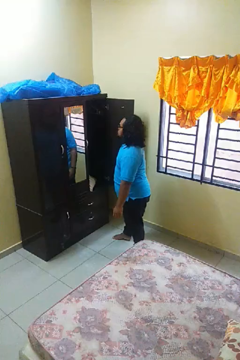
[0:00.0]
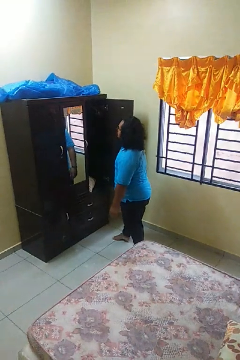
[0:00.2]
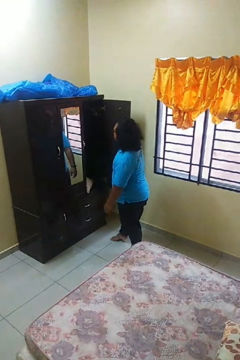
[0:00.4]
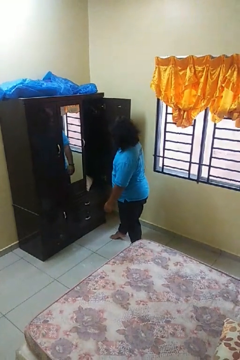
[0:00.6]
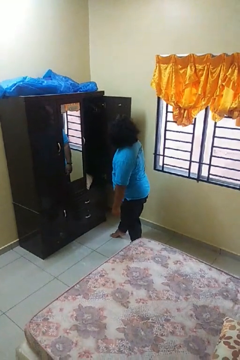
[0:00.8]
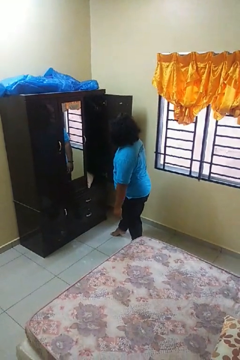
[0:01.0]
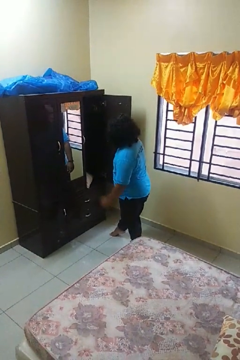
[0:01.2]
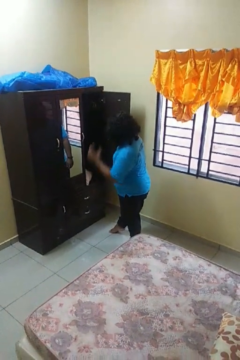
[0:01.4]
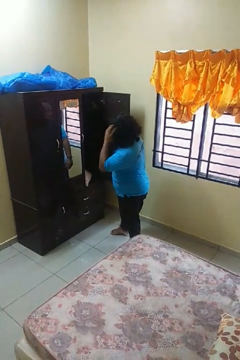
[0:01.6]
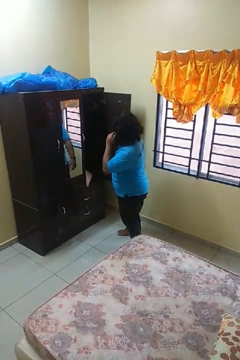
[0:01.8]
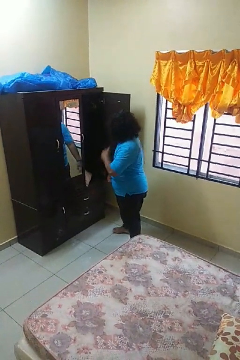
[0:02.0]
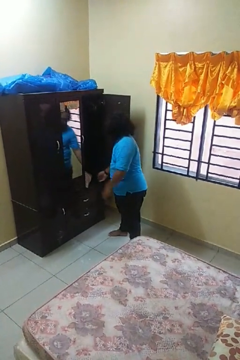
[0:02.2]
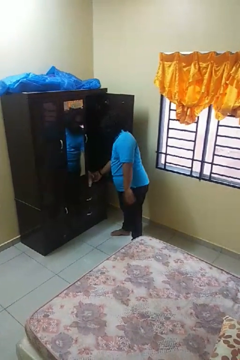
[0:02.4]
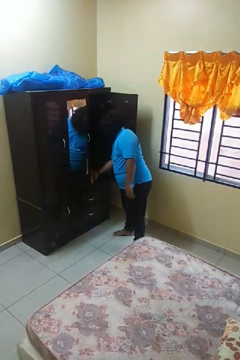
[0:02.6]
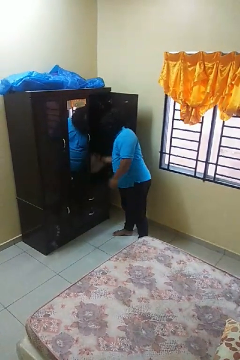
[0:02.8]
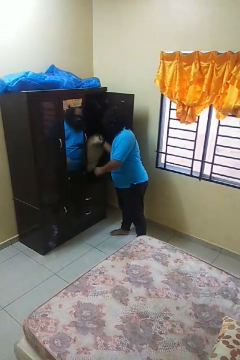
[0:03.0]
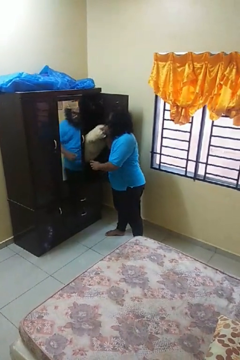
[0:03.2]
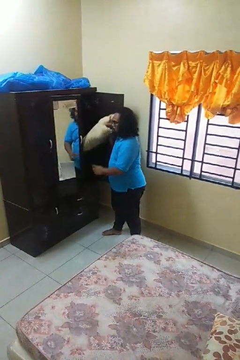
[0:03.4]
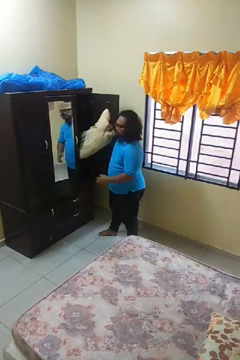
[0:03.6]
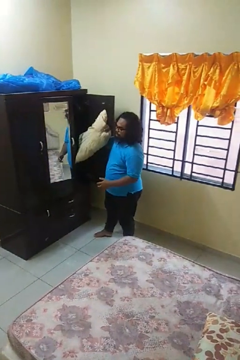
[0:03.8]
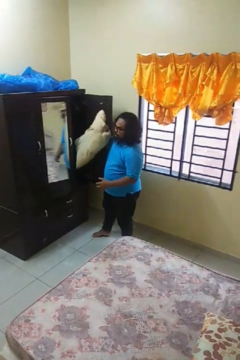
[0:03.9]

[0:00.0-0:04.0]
person picks up object from cabinet

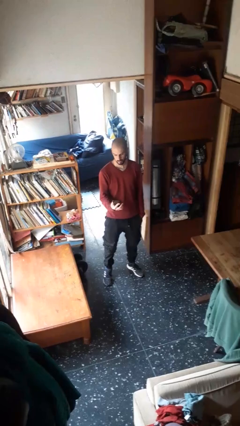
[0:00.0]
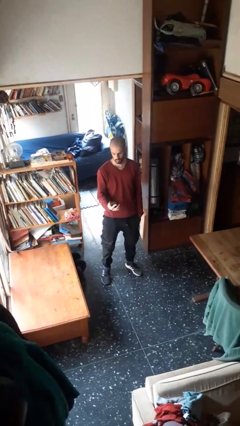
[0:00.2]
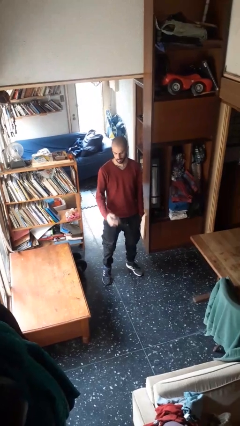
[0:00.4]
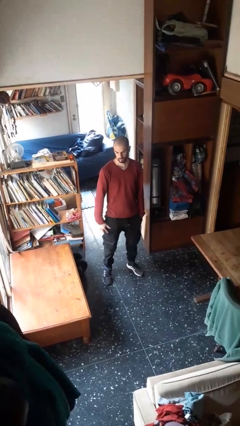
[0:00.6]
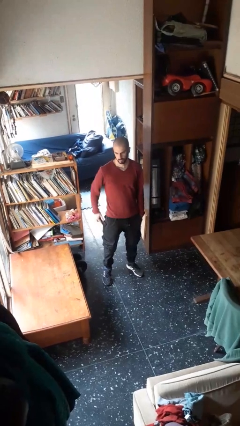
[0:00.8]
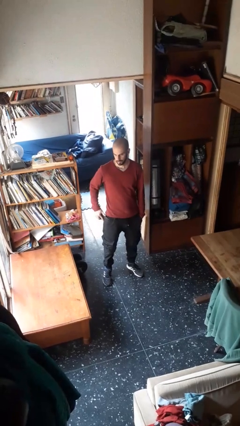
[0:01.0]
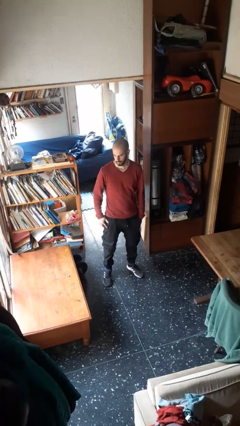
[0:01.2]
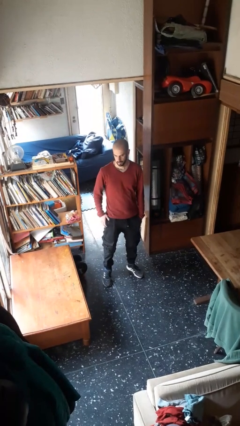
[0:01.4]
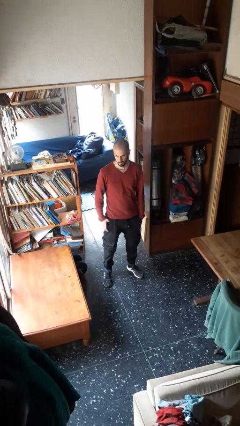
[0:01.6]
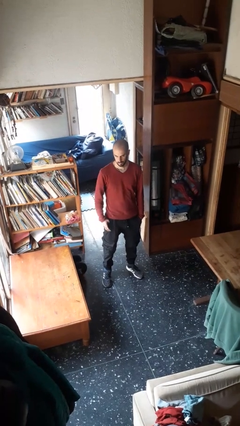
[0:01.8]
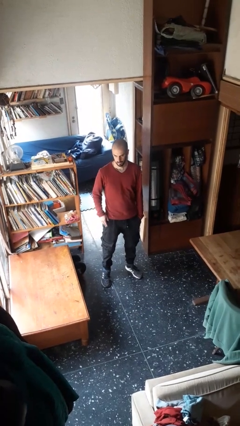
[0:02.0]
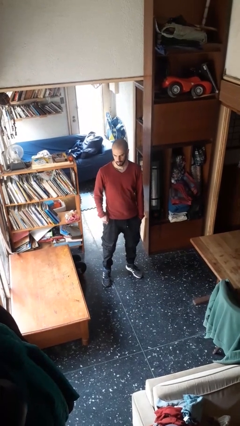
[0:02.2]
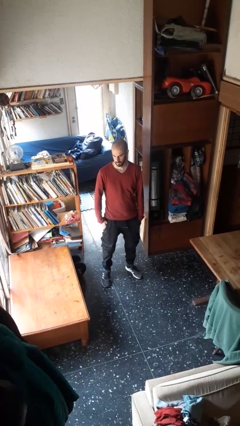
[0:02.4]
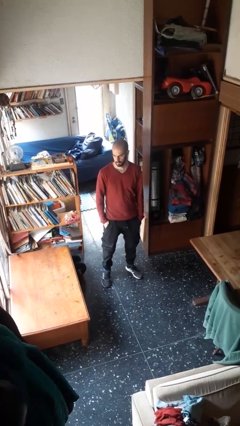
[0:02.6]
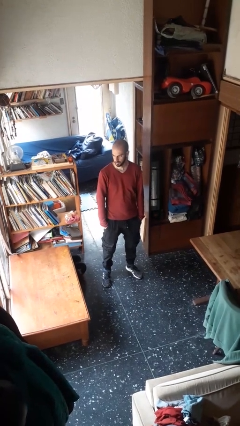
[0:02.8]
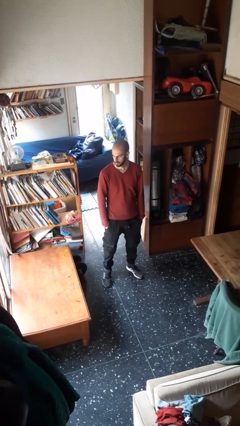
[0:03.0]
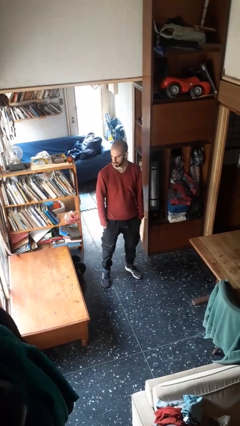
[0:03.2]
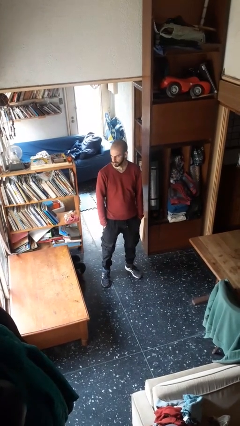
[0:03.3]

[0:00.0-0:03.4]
person puts phone into pocket

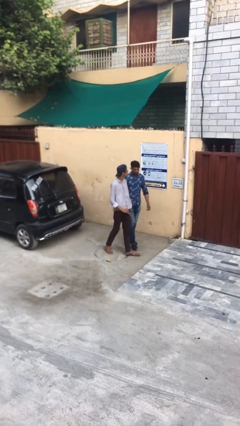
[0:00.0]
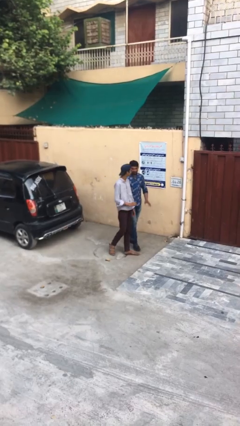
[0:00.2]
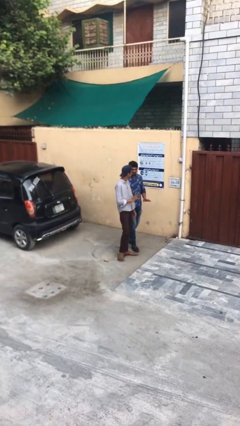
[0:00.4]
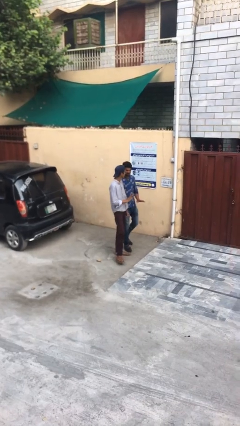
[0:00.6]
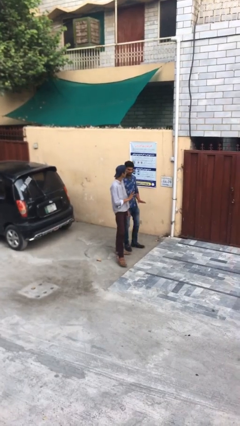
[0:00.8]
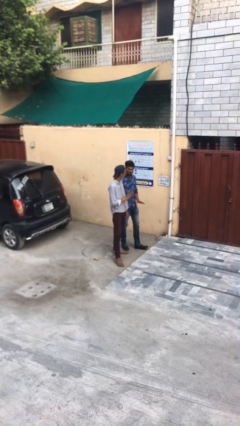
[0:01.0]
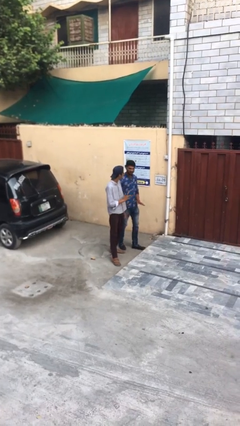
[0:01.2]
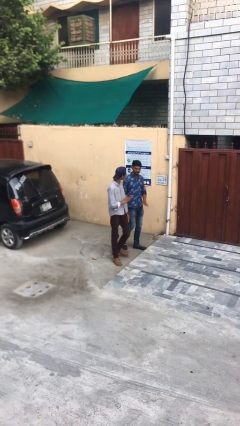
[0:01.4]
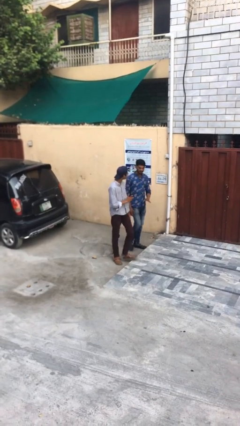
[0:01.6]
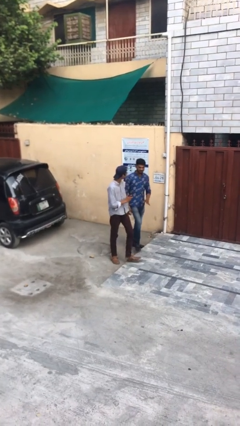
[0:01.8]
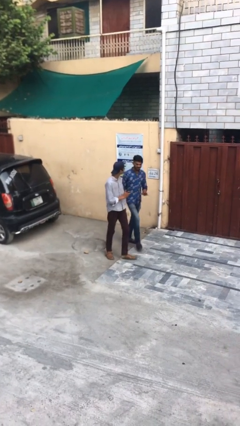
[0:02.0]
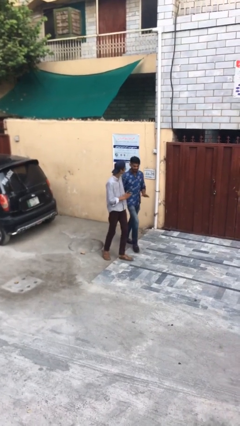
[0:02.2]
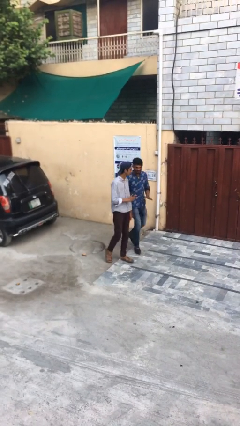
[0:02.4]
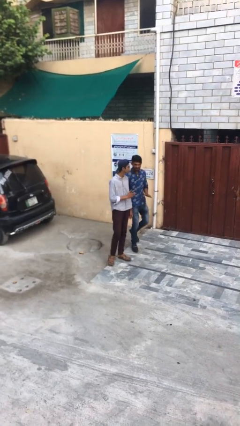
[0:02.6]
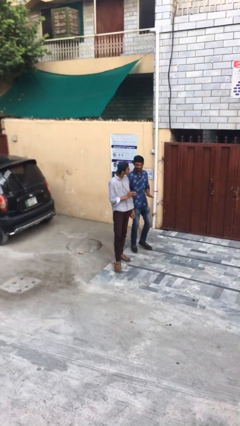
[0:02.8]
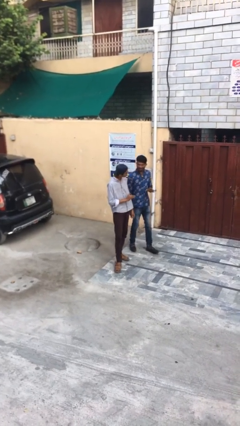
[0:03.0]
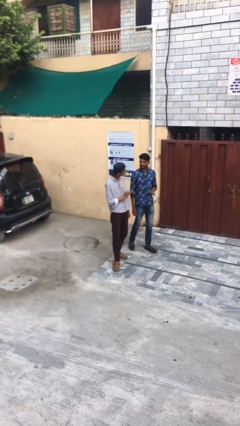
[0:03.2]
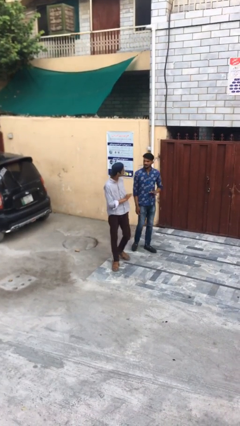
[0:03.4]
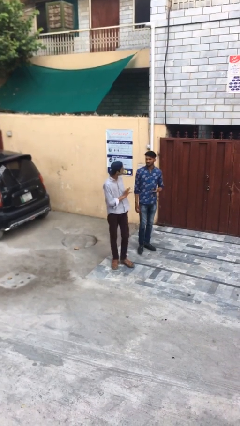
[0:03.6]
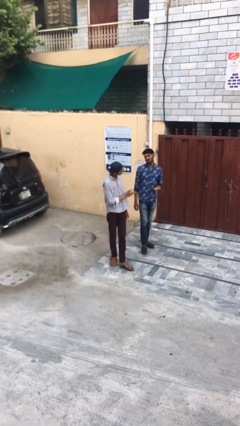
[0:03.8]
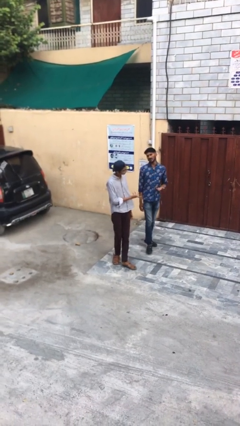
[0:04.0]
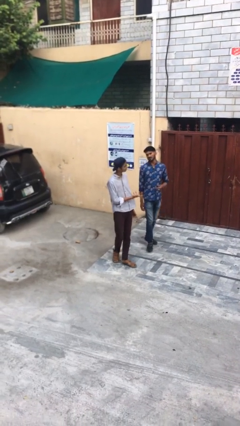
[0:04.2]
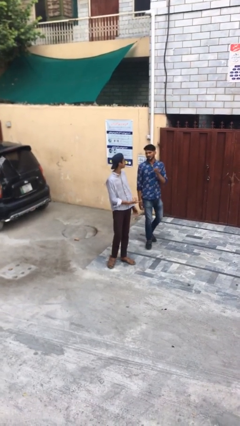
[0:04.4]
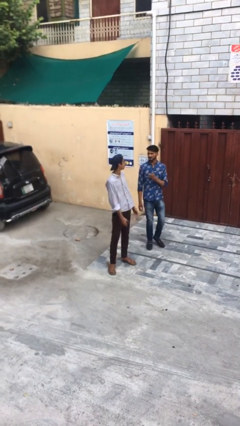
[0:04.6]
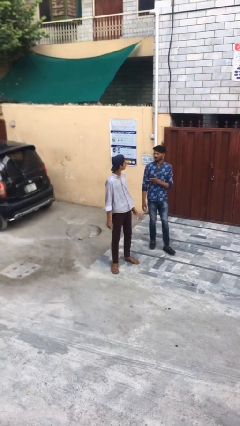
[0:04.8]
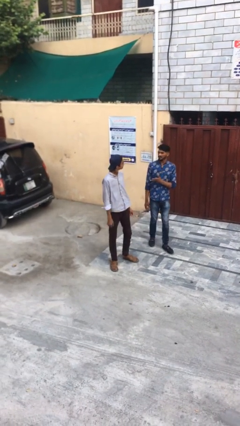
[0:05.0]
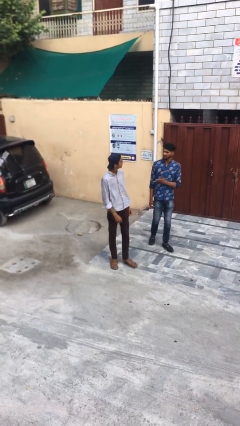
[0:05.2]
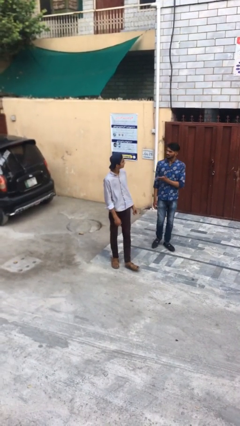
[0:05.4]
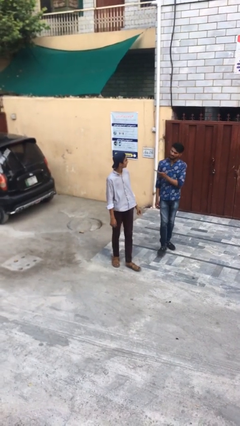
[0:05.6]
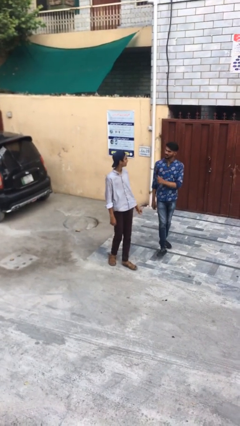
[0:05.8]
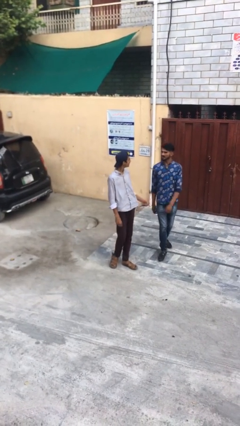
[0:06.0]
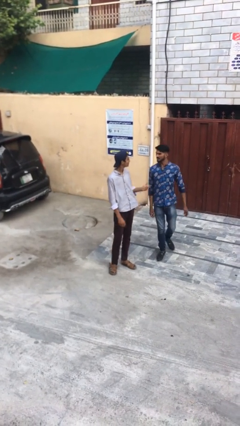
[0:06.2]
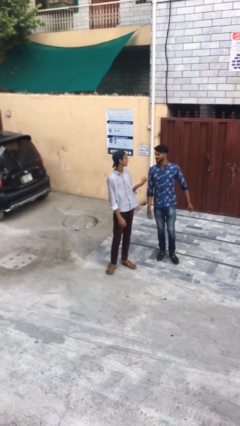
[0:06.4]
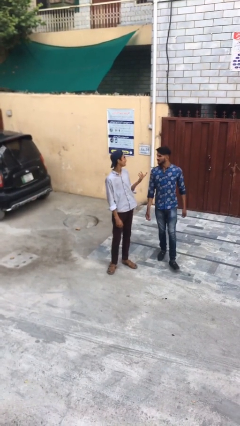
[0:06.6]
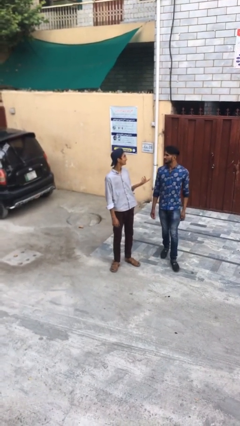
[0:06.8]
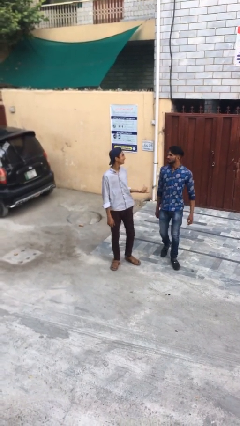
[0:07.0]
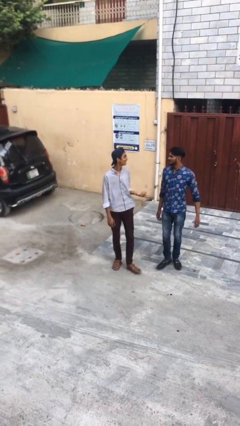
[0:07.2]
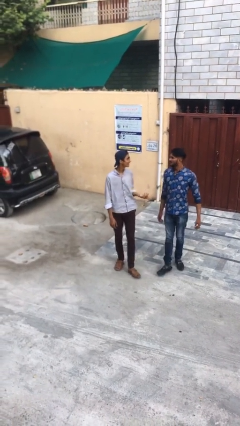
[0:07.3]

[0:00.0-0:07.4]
person talks to person

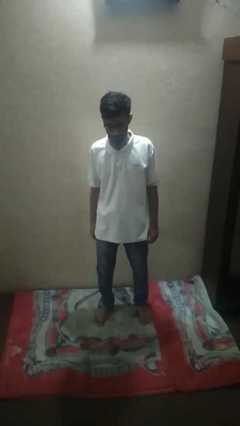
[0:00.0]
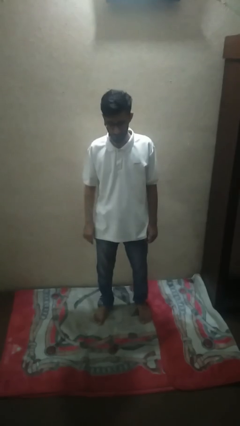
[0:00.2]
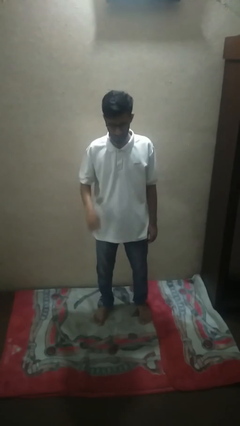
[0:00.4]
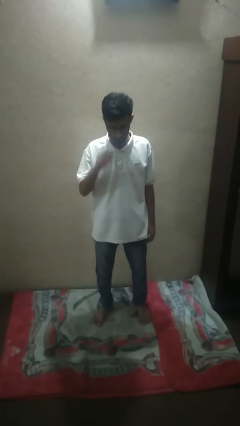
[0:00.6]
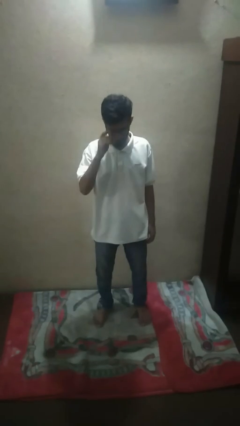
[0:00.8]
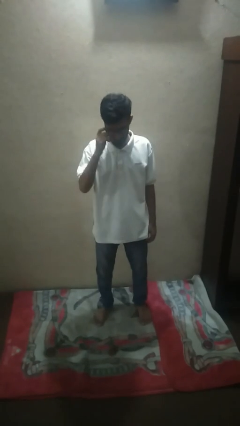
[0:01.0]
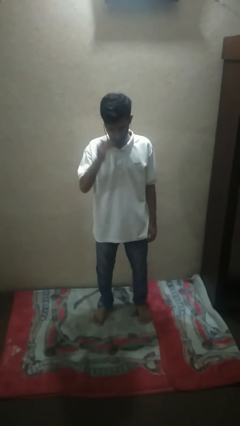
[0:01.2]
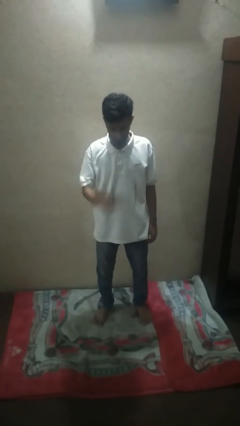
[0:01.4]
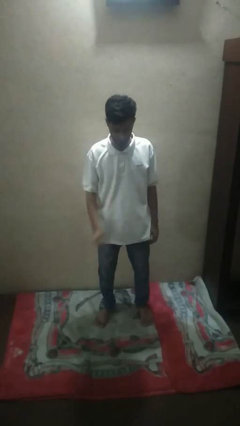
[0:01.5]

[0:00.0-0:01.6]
person takes off glasses

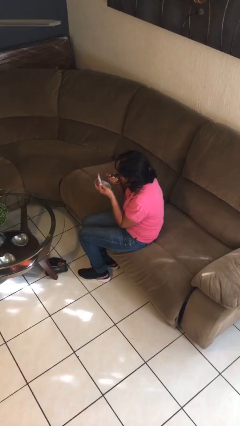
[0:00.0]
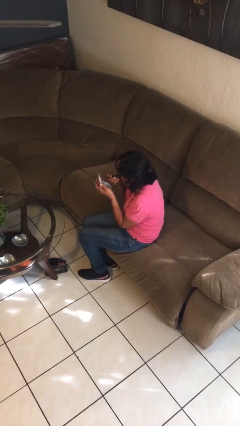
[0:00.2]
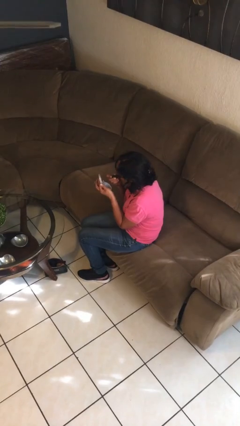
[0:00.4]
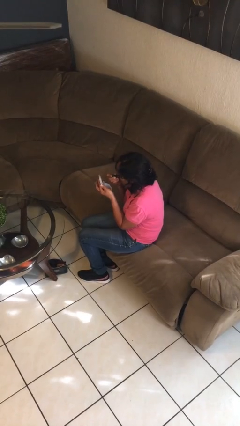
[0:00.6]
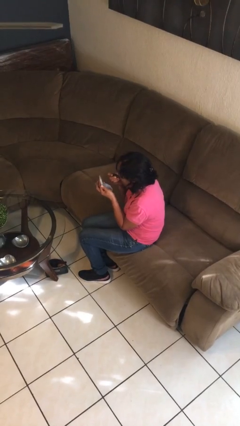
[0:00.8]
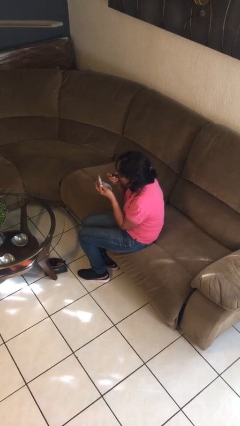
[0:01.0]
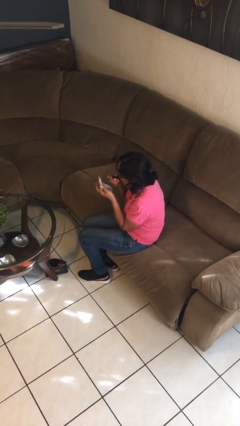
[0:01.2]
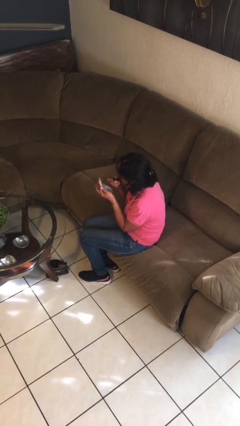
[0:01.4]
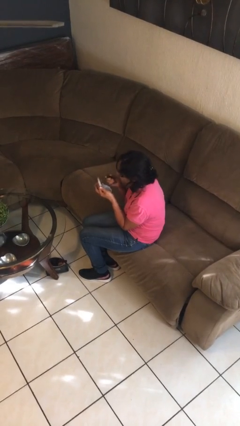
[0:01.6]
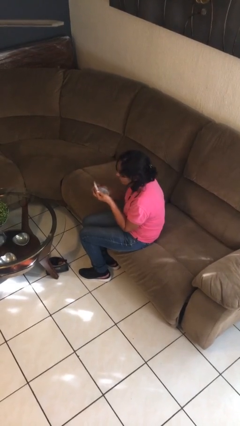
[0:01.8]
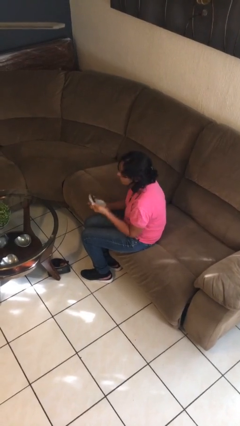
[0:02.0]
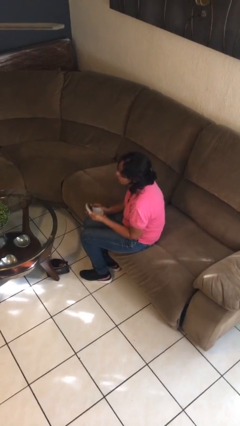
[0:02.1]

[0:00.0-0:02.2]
person applies lip makeup
